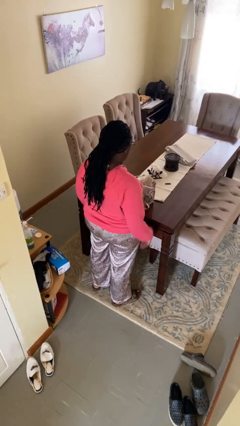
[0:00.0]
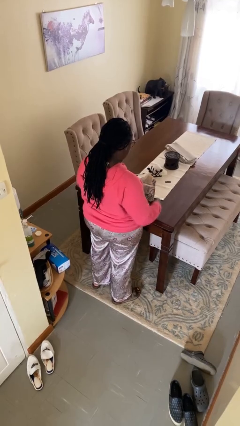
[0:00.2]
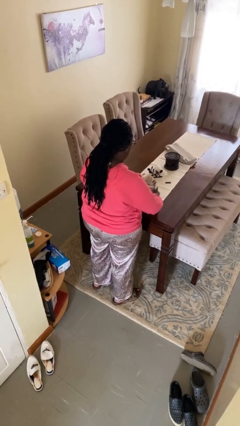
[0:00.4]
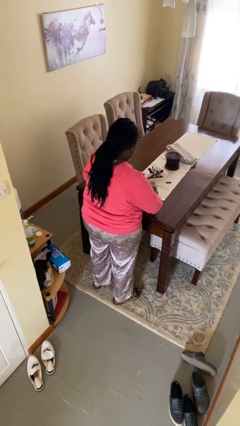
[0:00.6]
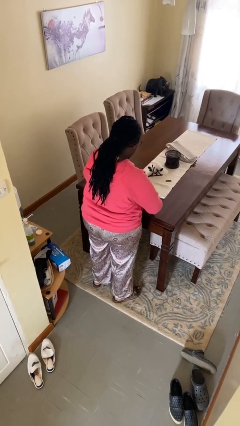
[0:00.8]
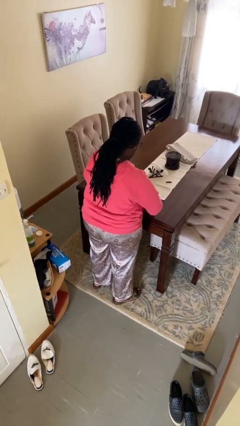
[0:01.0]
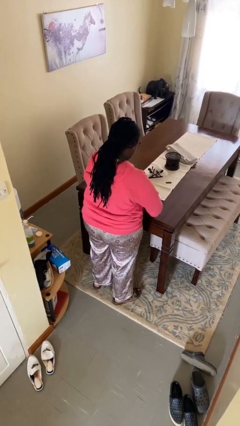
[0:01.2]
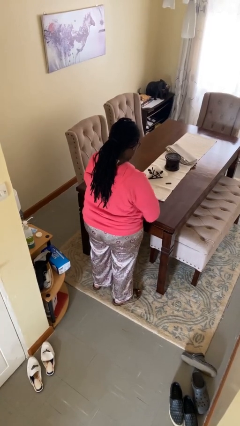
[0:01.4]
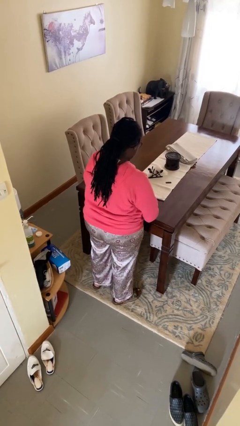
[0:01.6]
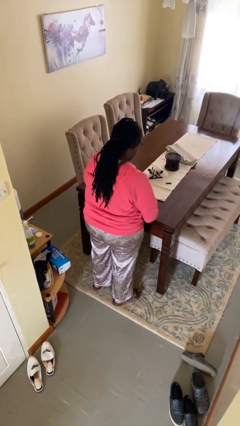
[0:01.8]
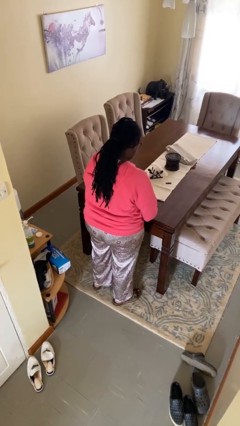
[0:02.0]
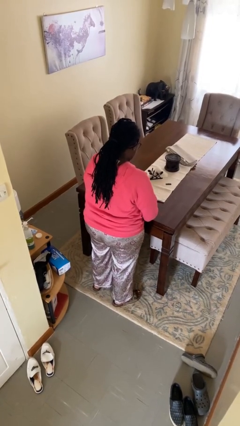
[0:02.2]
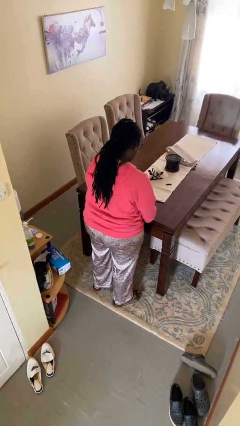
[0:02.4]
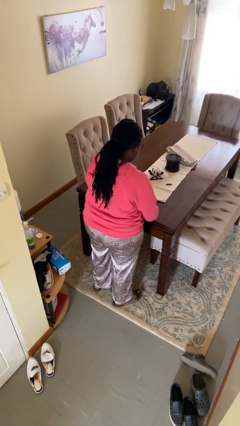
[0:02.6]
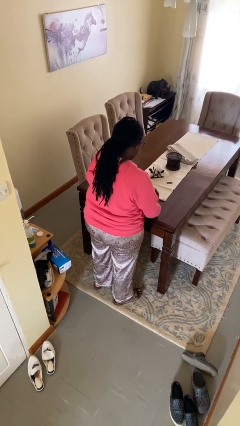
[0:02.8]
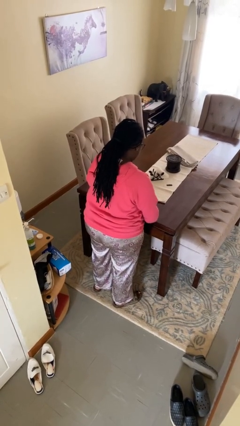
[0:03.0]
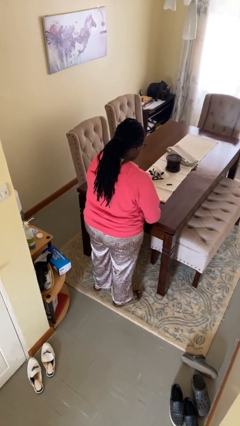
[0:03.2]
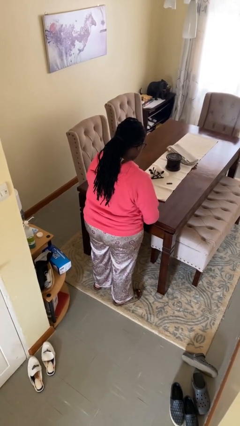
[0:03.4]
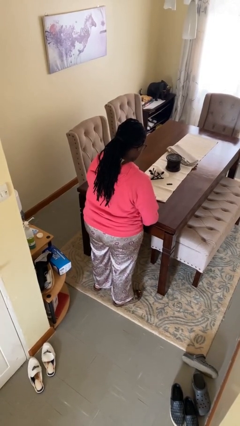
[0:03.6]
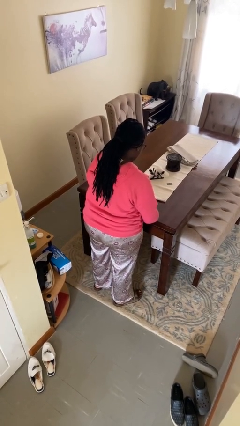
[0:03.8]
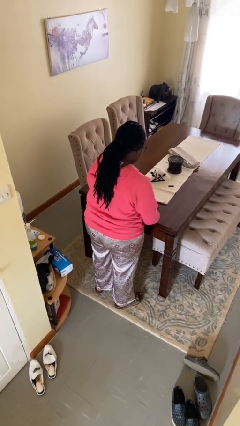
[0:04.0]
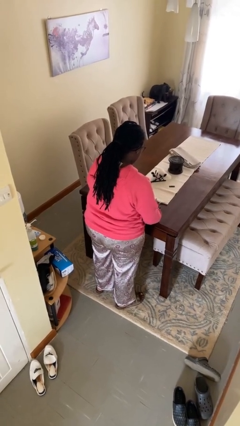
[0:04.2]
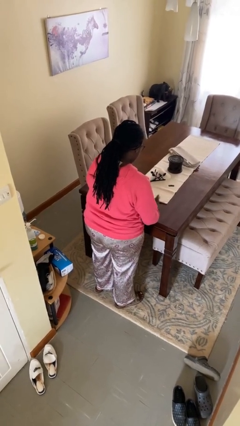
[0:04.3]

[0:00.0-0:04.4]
person wraps box

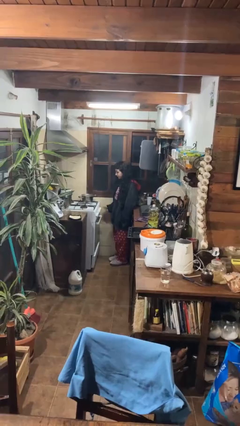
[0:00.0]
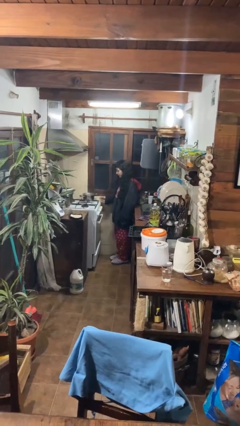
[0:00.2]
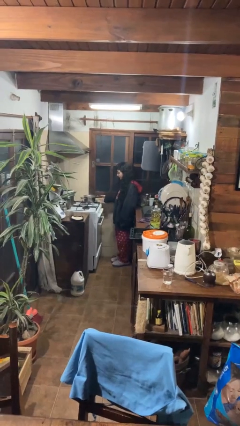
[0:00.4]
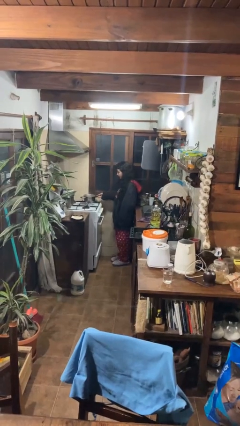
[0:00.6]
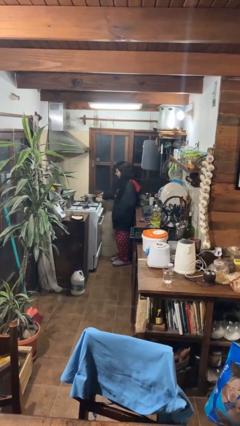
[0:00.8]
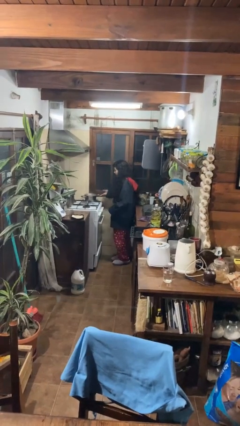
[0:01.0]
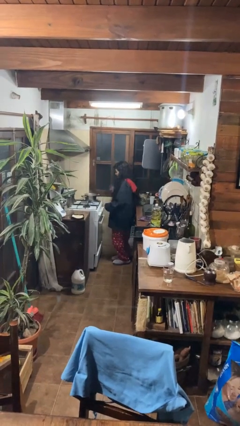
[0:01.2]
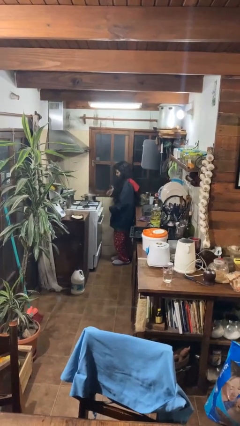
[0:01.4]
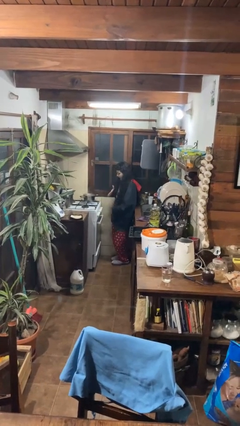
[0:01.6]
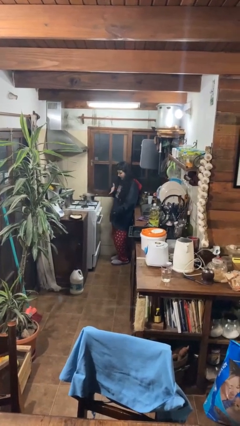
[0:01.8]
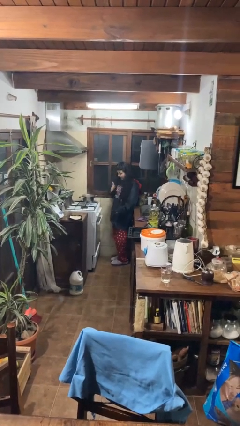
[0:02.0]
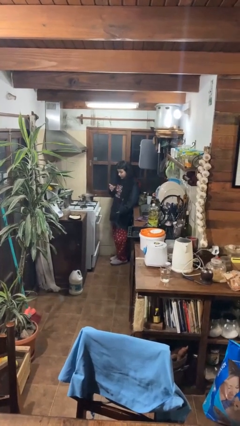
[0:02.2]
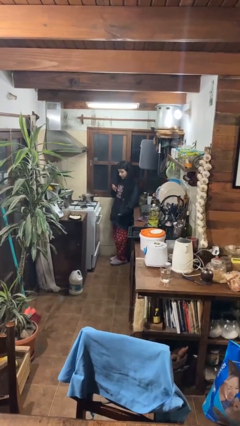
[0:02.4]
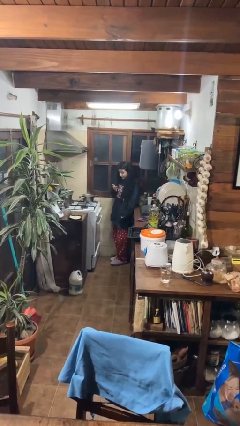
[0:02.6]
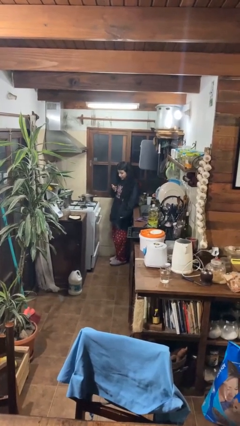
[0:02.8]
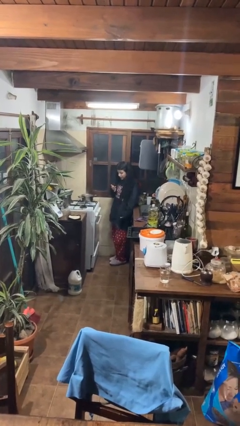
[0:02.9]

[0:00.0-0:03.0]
person burns hand

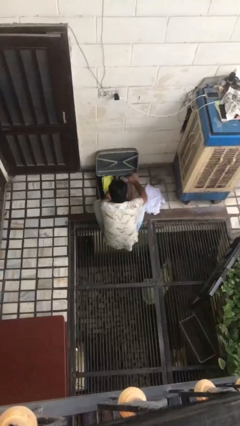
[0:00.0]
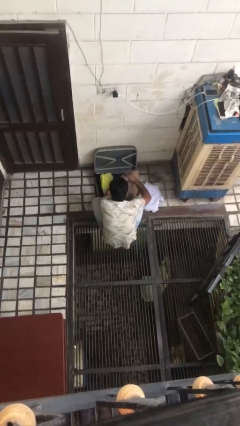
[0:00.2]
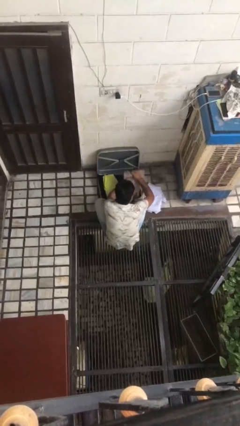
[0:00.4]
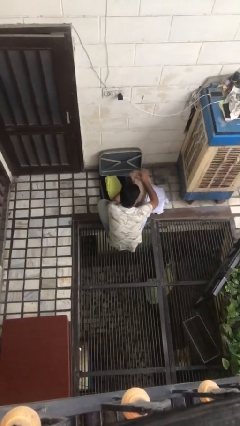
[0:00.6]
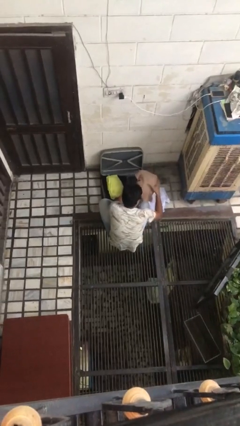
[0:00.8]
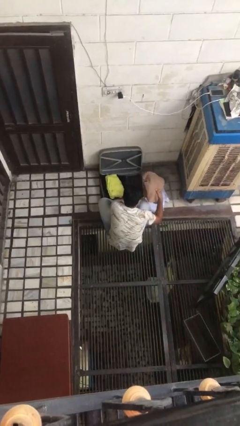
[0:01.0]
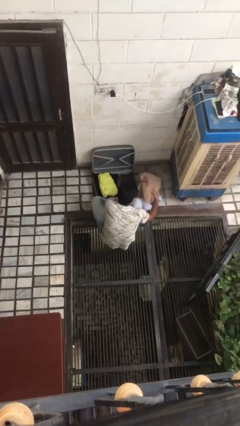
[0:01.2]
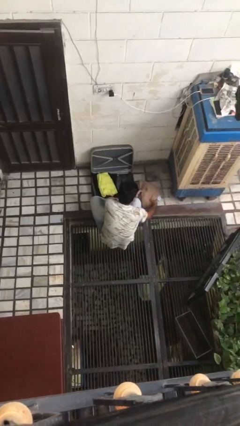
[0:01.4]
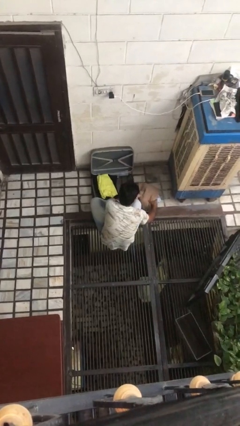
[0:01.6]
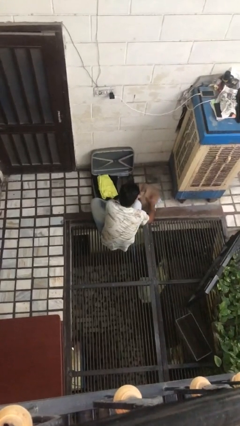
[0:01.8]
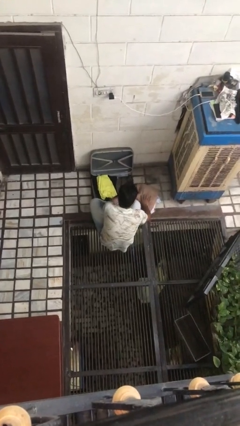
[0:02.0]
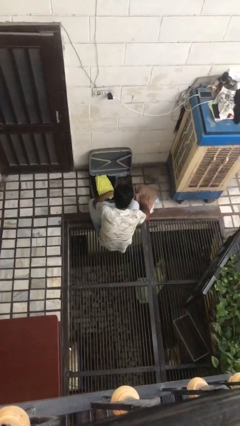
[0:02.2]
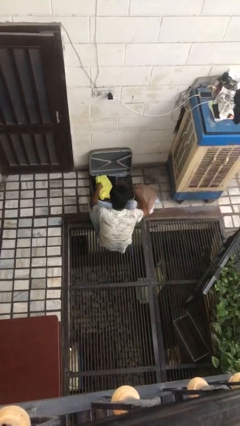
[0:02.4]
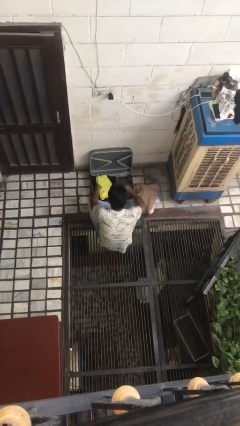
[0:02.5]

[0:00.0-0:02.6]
person unloads clothes from suitcase

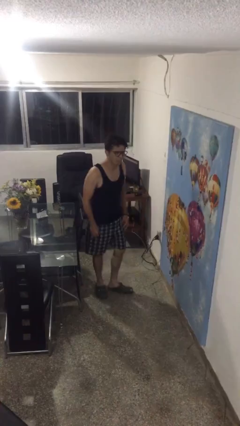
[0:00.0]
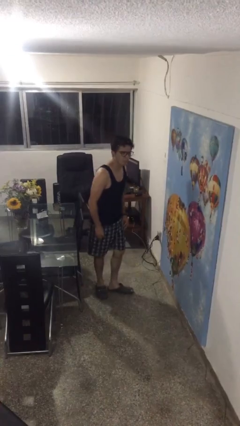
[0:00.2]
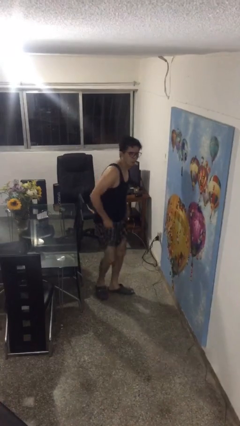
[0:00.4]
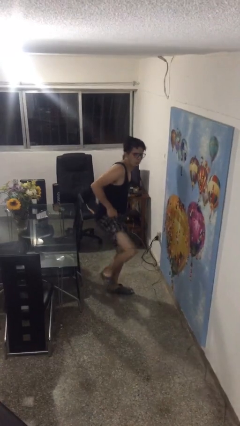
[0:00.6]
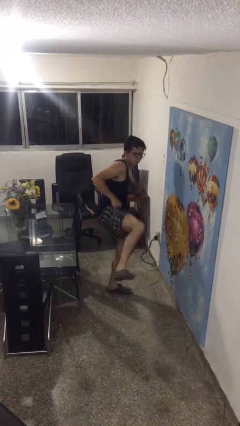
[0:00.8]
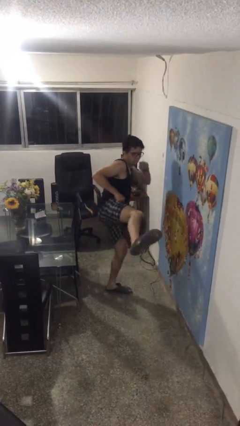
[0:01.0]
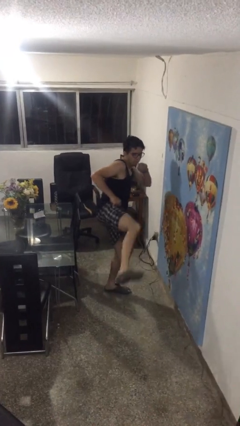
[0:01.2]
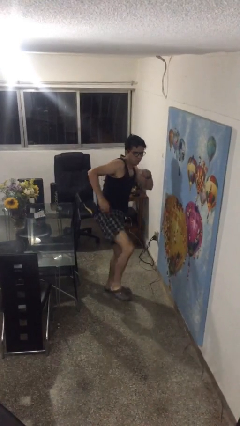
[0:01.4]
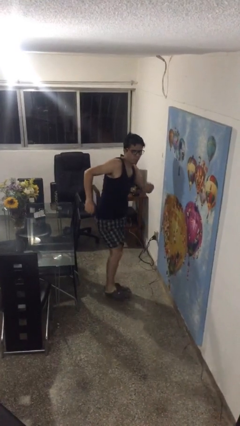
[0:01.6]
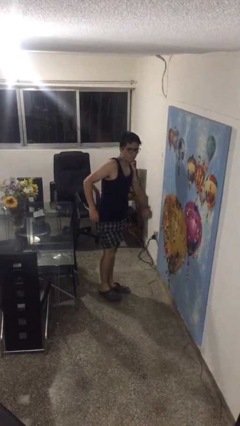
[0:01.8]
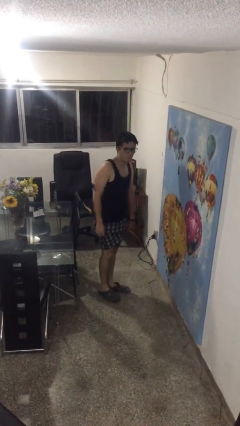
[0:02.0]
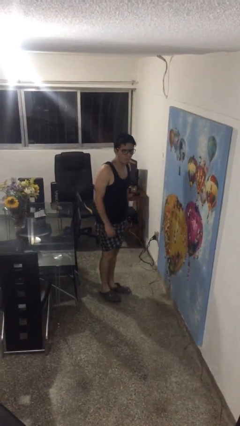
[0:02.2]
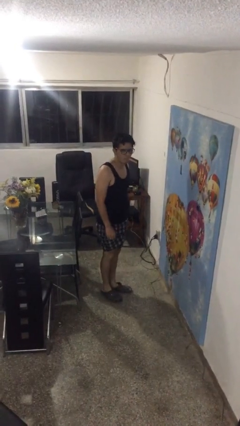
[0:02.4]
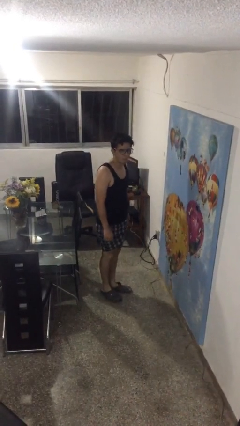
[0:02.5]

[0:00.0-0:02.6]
person karate kicks

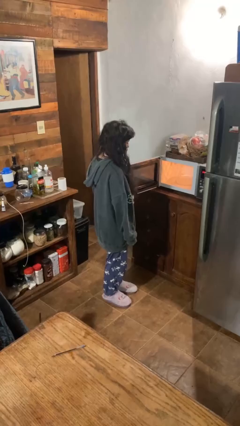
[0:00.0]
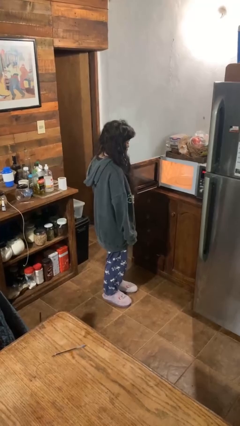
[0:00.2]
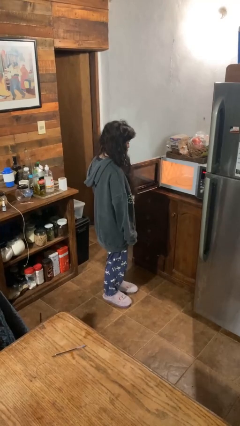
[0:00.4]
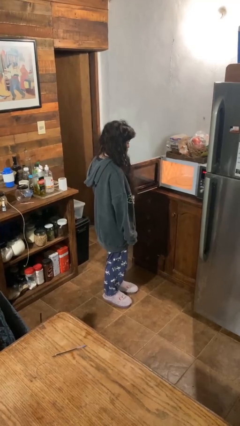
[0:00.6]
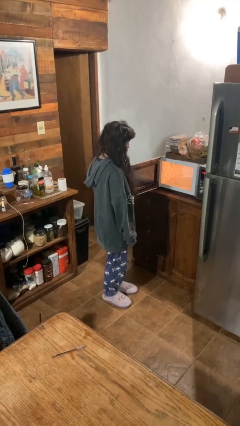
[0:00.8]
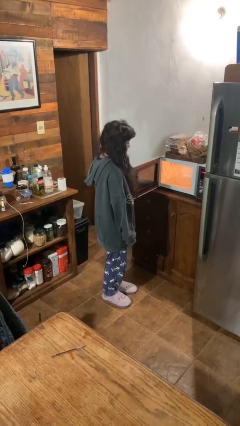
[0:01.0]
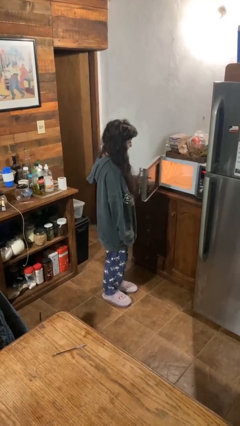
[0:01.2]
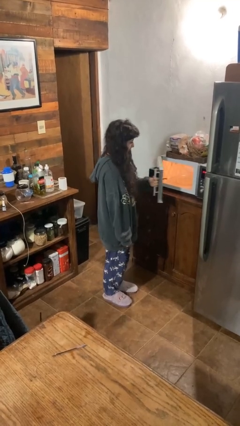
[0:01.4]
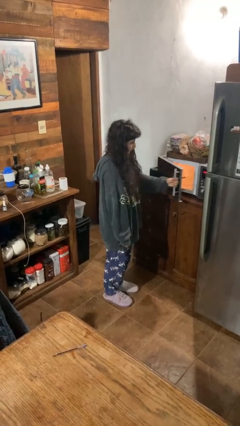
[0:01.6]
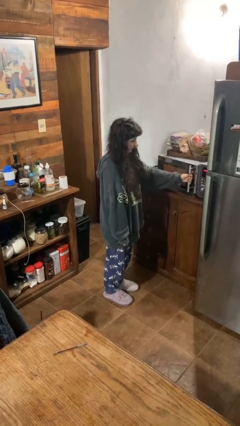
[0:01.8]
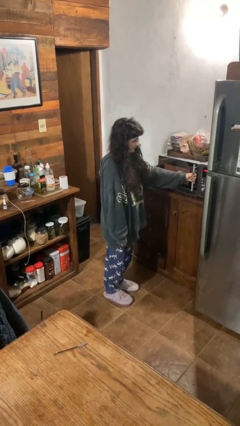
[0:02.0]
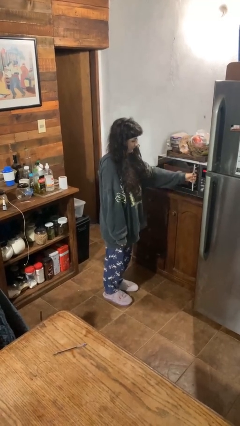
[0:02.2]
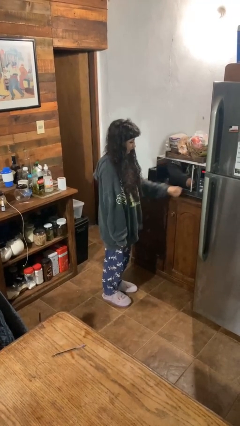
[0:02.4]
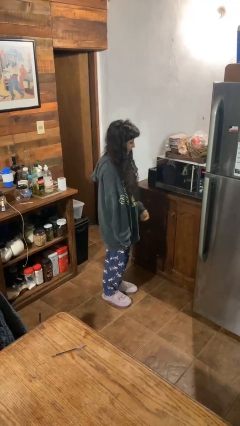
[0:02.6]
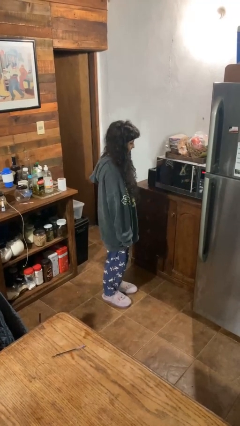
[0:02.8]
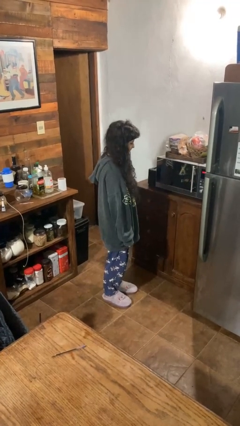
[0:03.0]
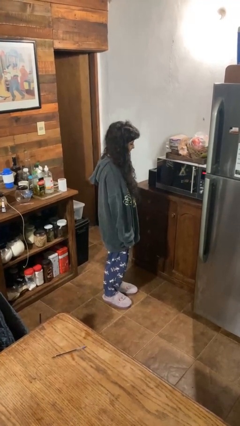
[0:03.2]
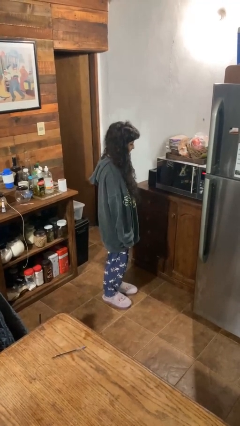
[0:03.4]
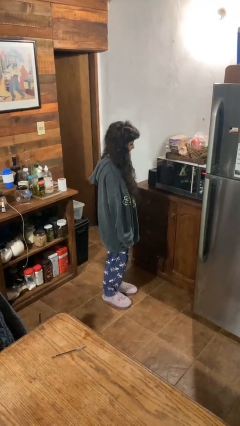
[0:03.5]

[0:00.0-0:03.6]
person closes microwave

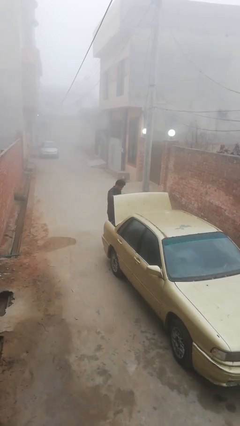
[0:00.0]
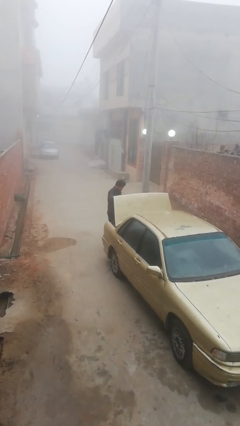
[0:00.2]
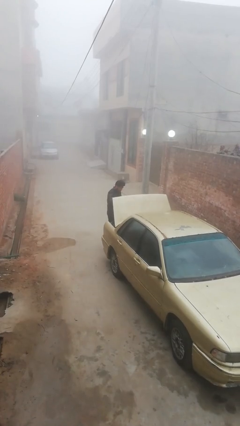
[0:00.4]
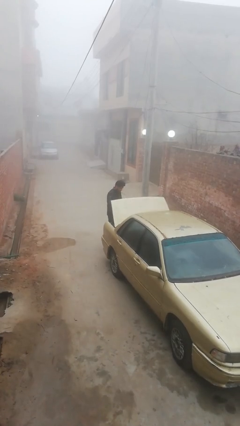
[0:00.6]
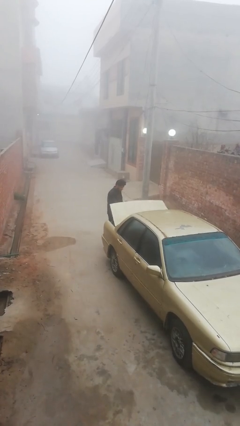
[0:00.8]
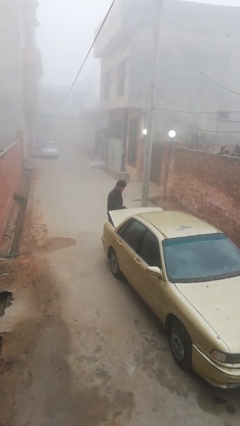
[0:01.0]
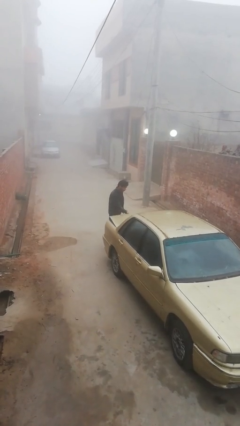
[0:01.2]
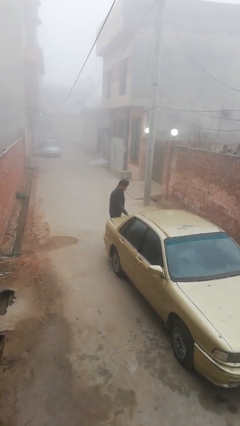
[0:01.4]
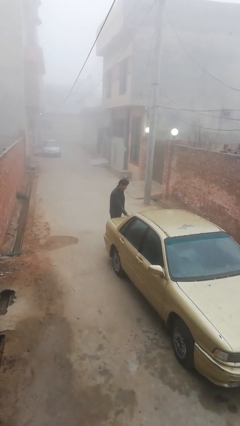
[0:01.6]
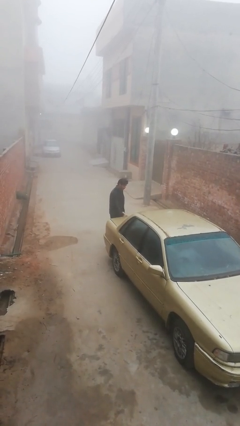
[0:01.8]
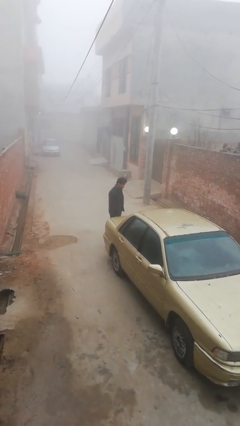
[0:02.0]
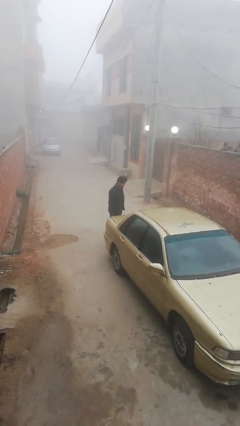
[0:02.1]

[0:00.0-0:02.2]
person closes car trunk
